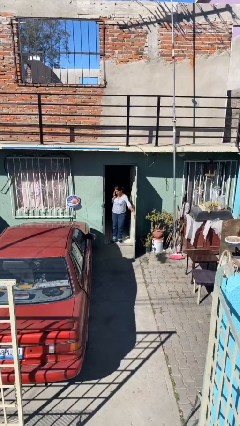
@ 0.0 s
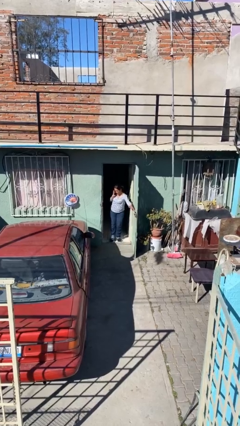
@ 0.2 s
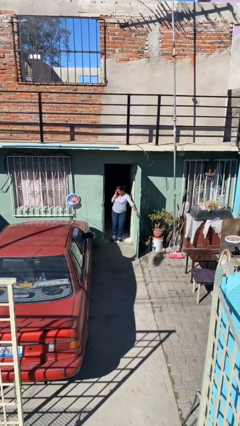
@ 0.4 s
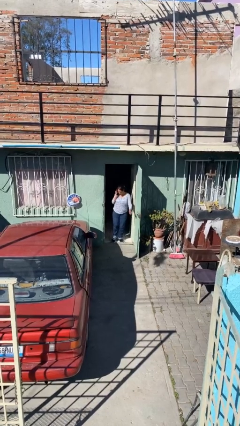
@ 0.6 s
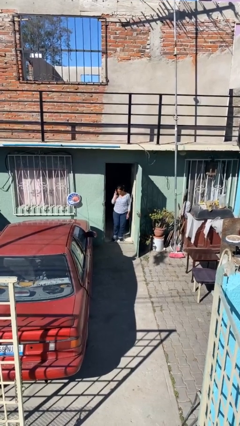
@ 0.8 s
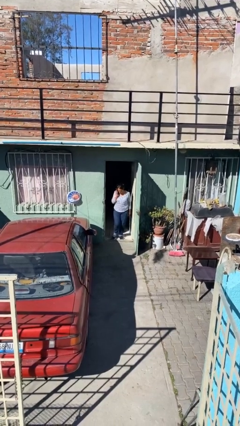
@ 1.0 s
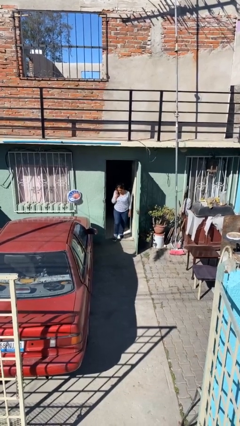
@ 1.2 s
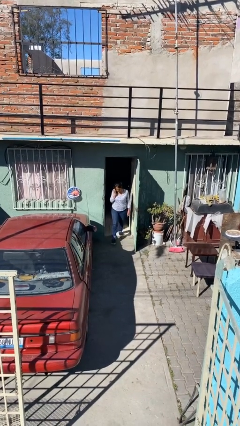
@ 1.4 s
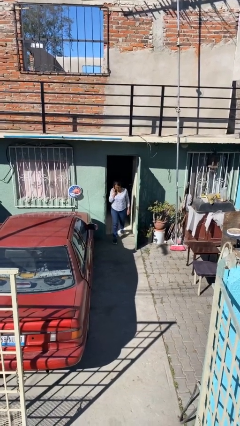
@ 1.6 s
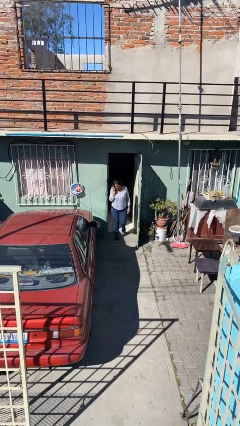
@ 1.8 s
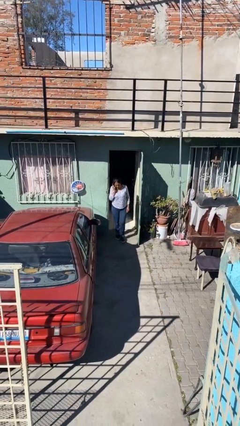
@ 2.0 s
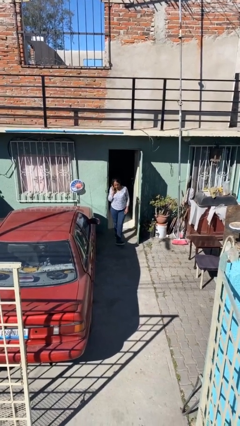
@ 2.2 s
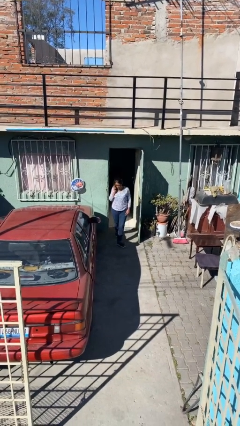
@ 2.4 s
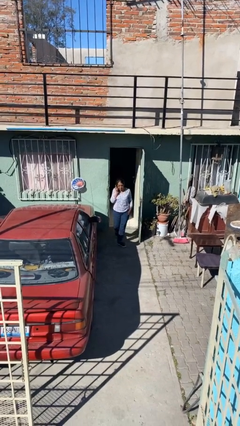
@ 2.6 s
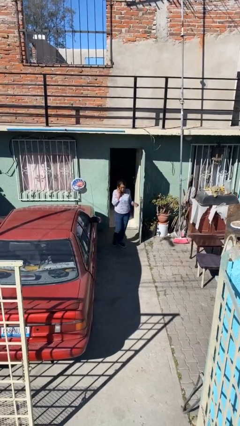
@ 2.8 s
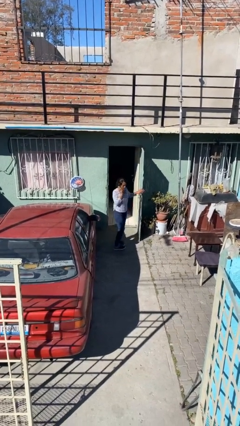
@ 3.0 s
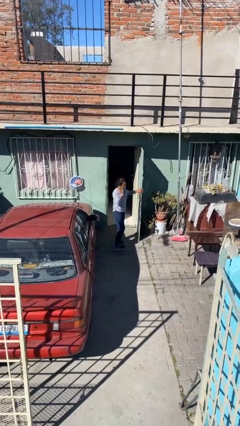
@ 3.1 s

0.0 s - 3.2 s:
person enters scene through structure

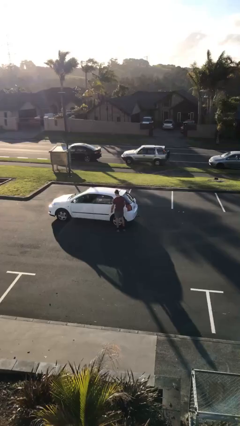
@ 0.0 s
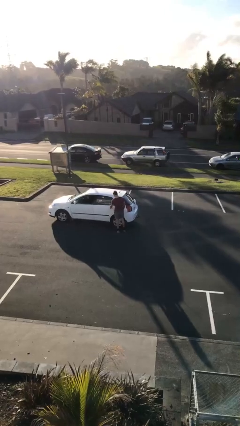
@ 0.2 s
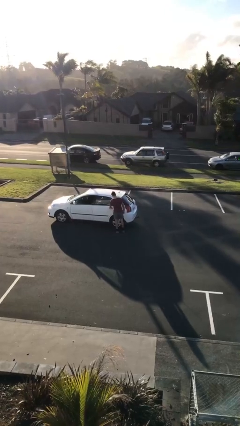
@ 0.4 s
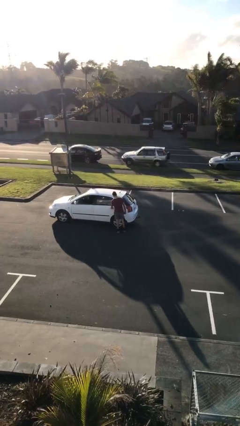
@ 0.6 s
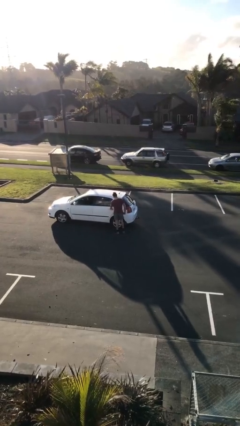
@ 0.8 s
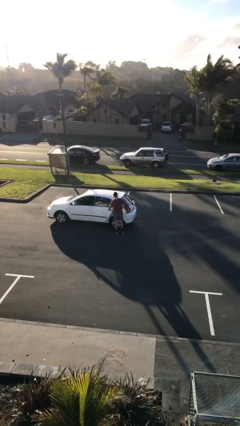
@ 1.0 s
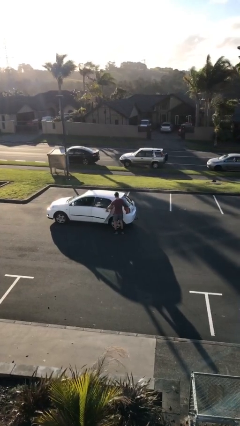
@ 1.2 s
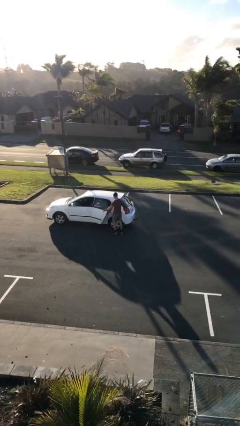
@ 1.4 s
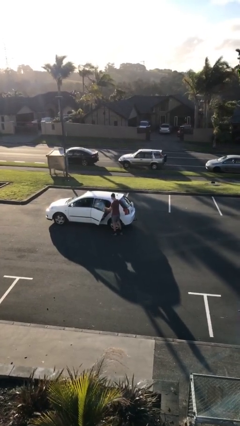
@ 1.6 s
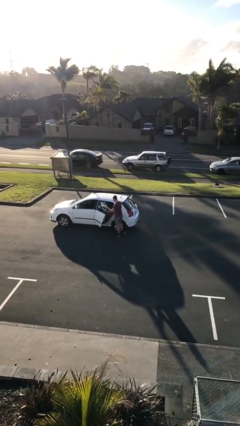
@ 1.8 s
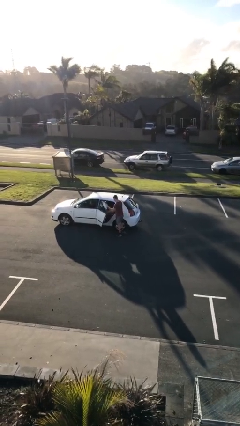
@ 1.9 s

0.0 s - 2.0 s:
person opens car door

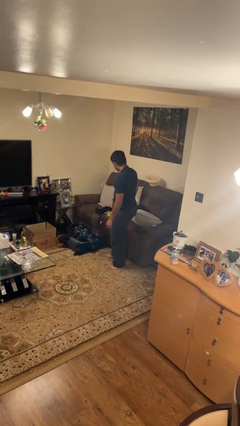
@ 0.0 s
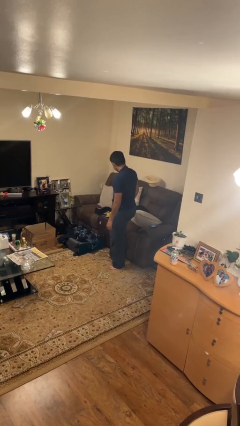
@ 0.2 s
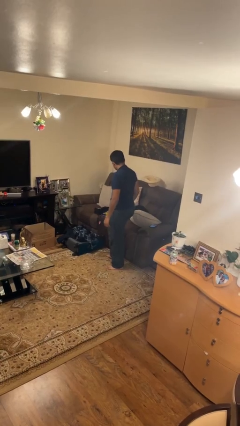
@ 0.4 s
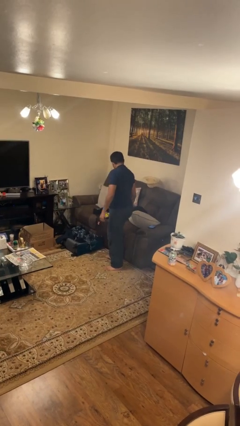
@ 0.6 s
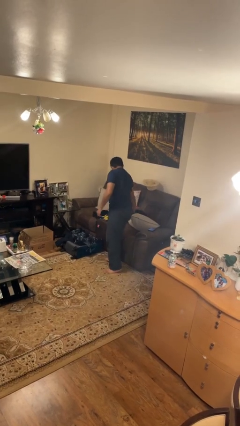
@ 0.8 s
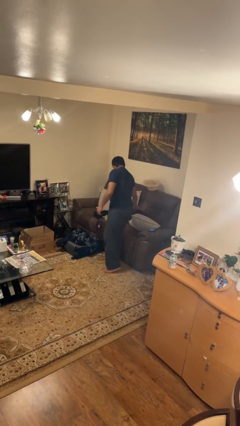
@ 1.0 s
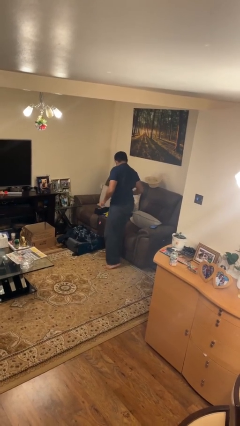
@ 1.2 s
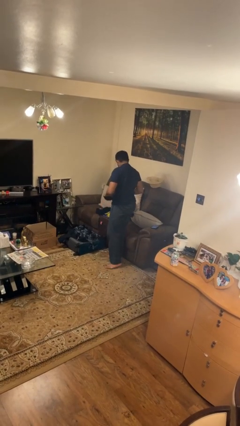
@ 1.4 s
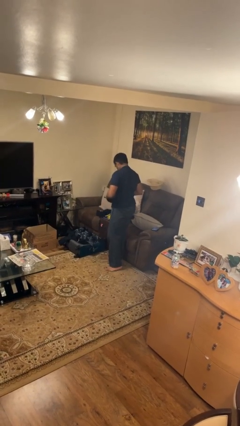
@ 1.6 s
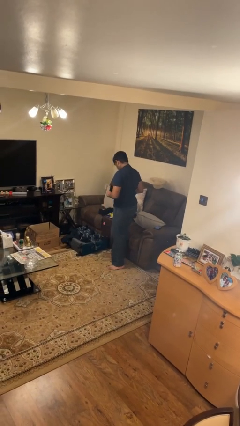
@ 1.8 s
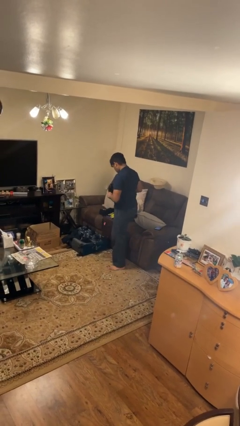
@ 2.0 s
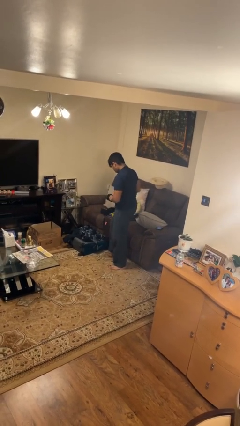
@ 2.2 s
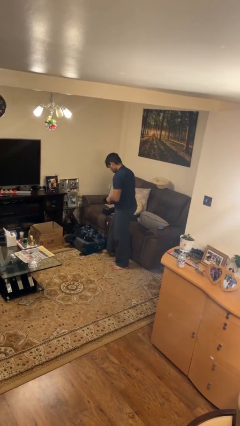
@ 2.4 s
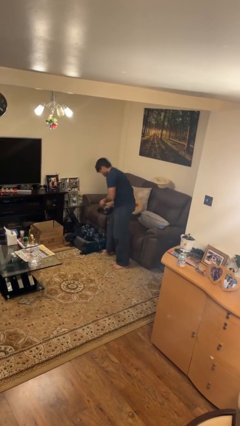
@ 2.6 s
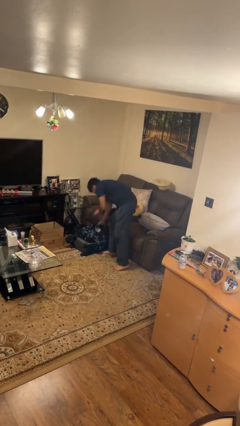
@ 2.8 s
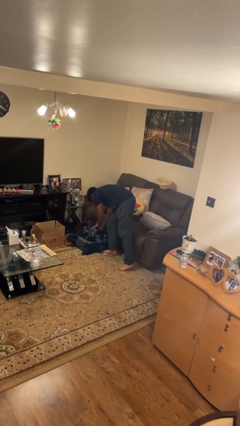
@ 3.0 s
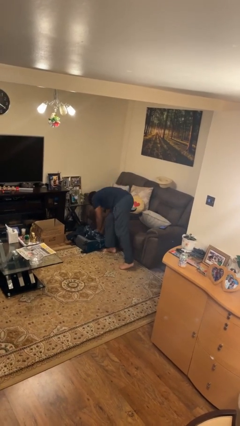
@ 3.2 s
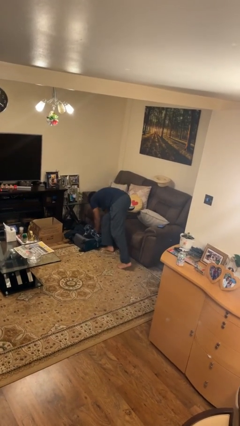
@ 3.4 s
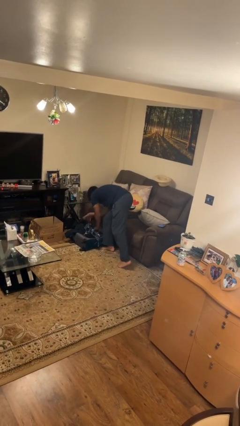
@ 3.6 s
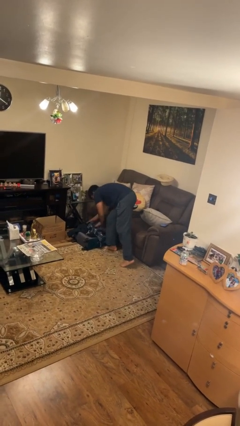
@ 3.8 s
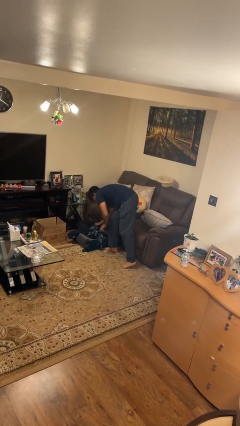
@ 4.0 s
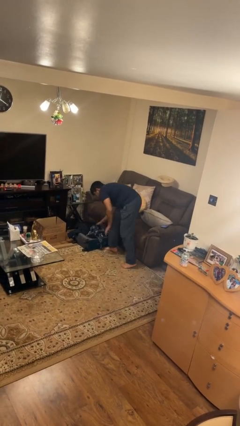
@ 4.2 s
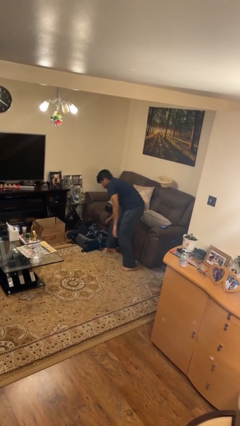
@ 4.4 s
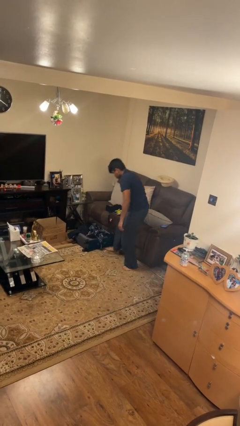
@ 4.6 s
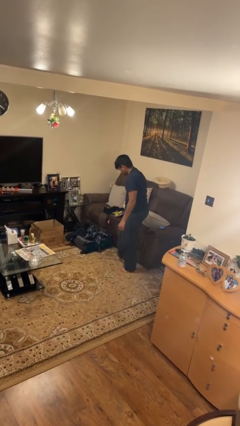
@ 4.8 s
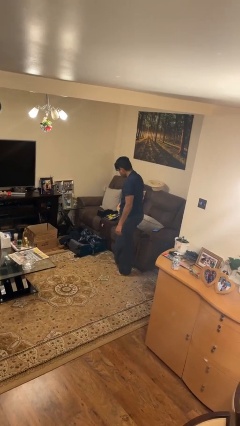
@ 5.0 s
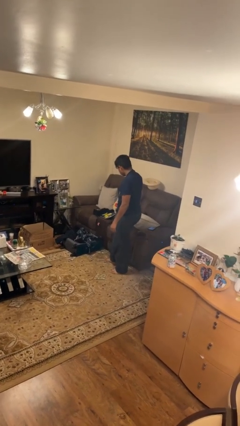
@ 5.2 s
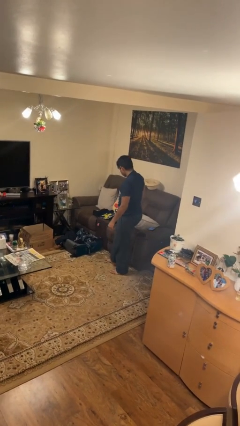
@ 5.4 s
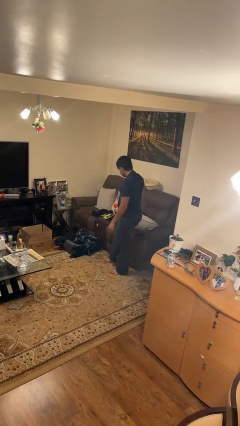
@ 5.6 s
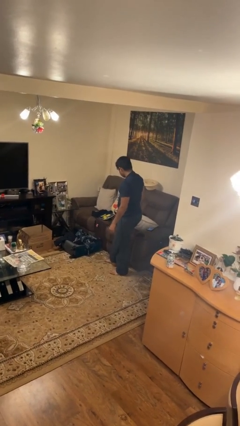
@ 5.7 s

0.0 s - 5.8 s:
person loads clothes into suitcase

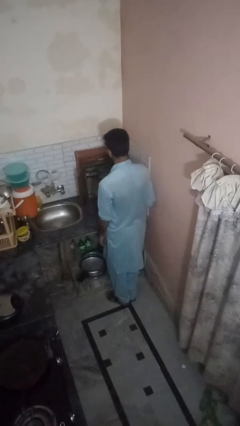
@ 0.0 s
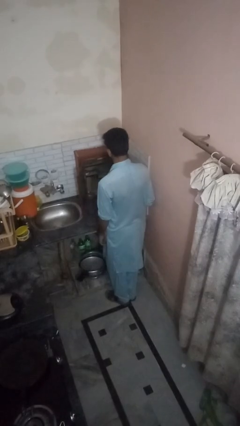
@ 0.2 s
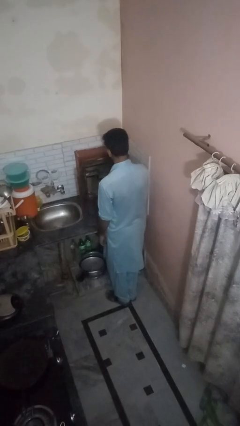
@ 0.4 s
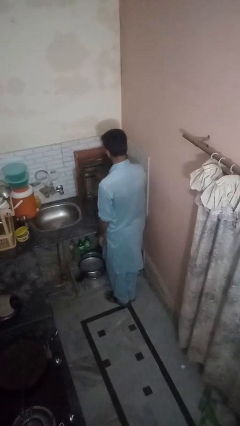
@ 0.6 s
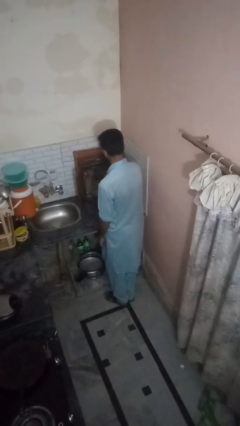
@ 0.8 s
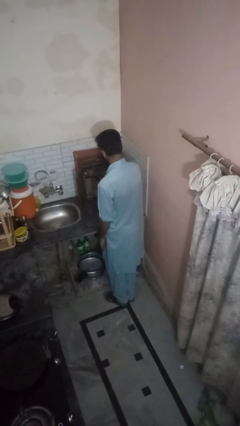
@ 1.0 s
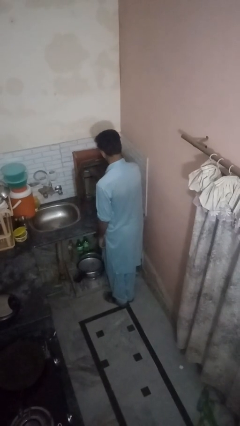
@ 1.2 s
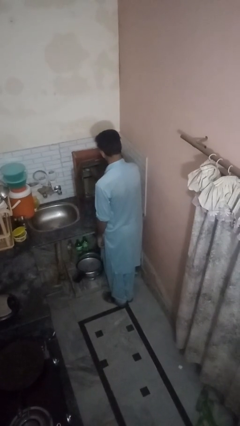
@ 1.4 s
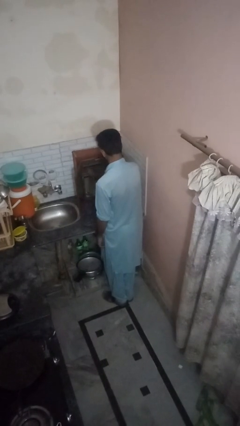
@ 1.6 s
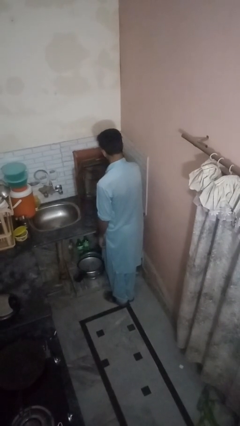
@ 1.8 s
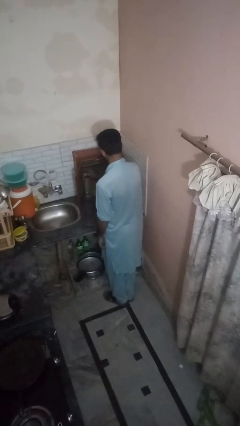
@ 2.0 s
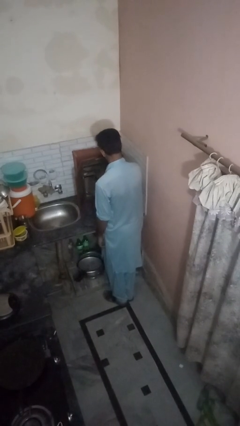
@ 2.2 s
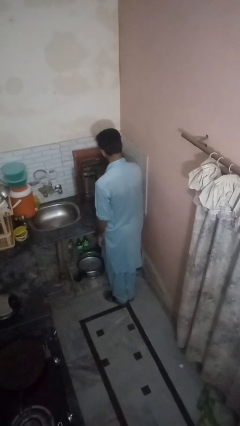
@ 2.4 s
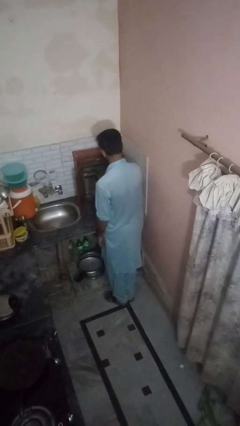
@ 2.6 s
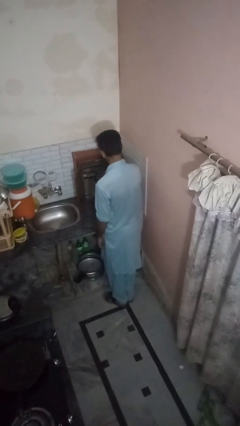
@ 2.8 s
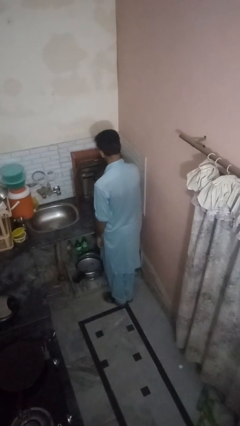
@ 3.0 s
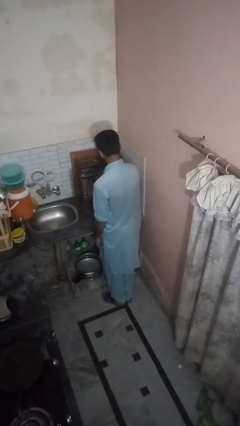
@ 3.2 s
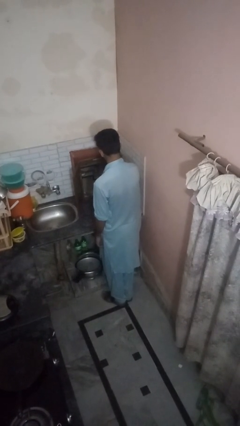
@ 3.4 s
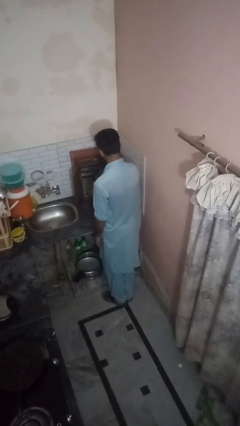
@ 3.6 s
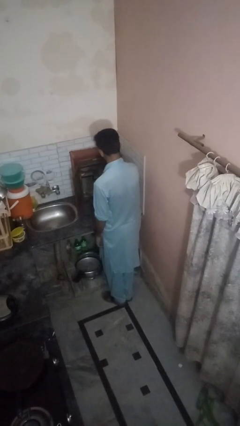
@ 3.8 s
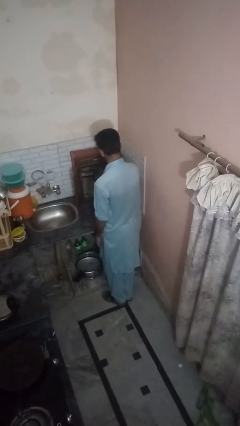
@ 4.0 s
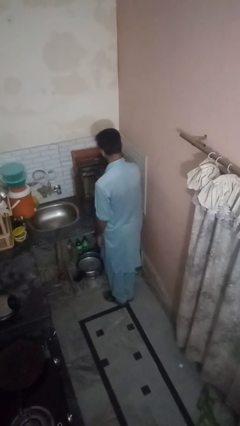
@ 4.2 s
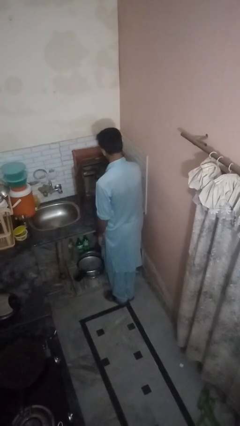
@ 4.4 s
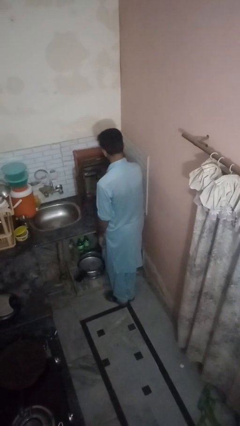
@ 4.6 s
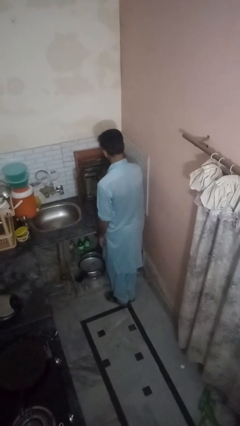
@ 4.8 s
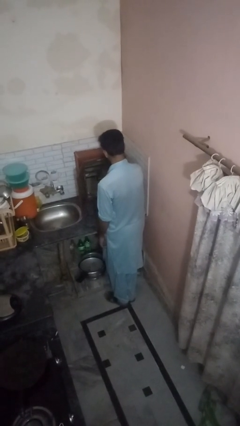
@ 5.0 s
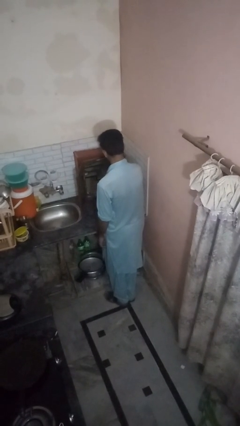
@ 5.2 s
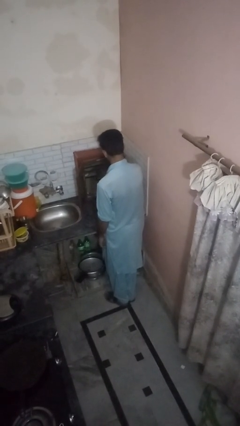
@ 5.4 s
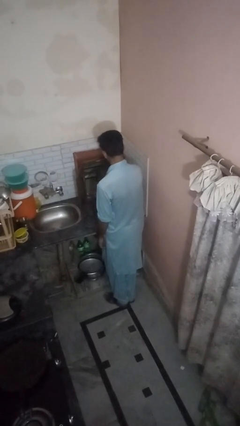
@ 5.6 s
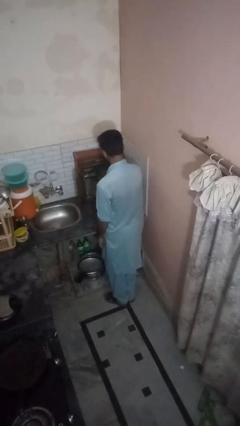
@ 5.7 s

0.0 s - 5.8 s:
person searches in kitchen drawer

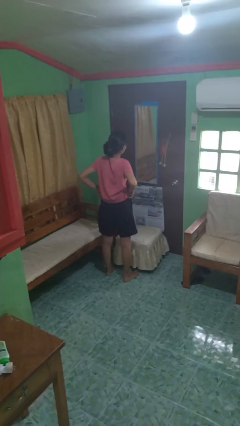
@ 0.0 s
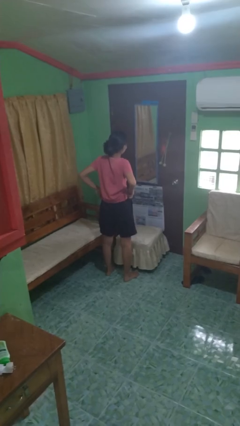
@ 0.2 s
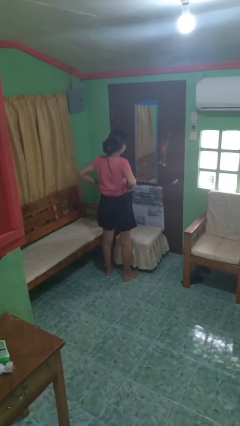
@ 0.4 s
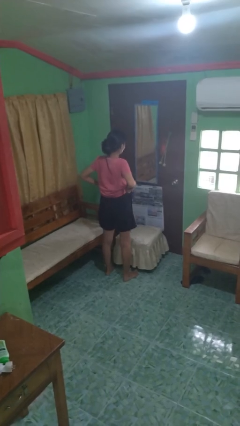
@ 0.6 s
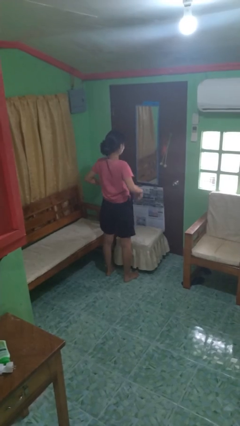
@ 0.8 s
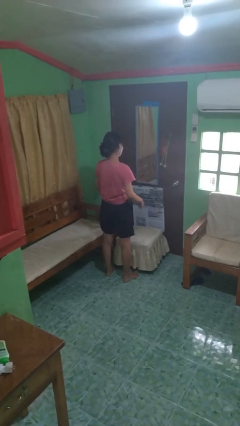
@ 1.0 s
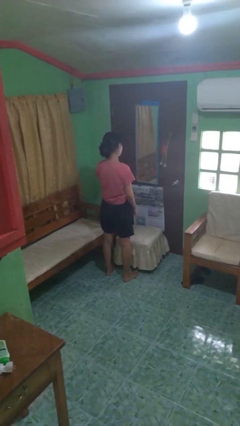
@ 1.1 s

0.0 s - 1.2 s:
person hikes up pants
